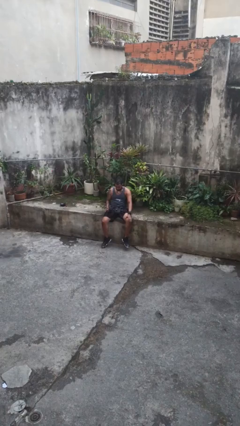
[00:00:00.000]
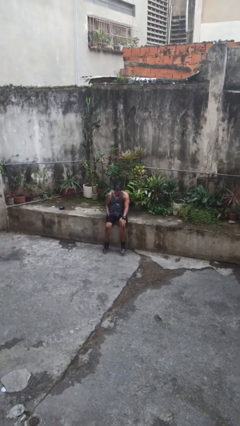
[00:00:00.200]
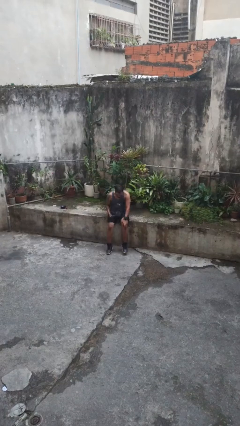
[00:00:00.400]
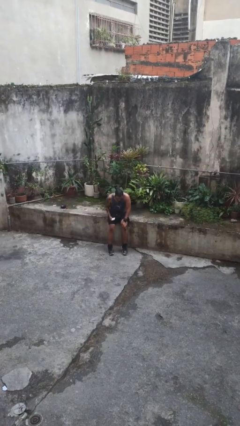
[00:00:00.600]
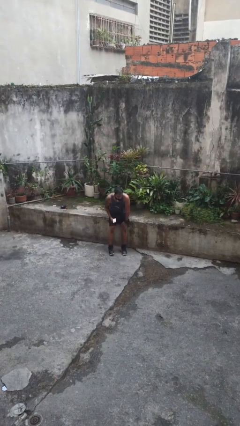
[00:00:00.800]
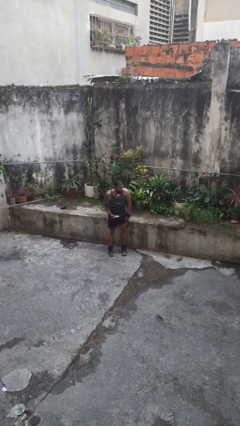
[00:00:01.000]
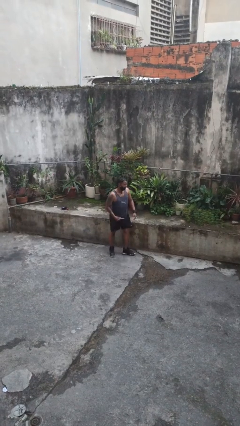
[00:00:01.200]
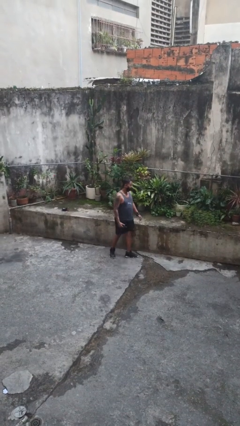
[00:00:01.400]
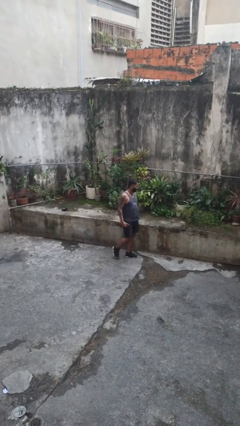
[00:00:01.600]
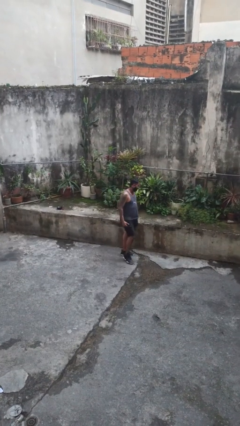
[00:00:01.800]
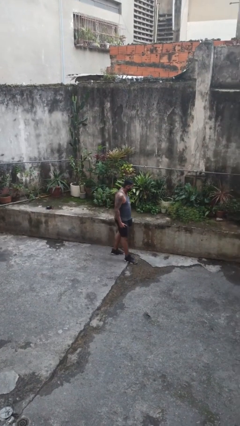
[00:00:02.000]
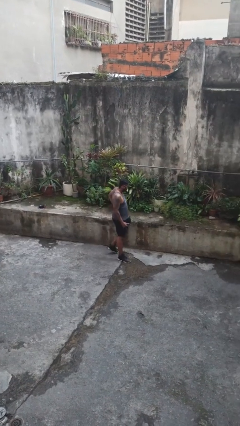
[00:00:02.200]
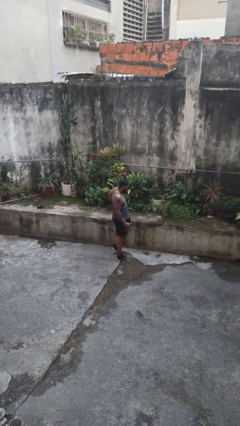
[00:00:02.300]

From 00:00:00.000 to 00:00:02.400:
person stands up

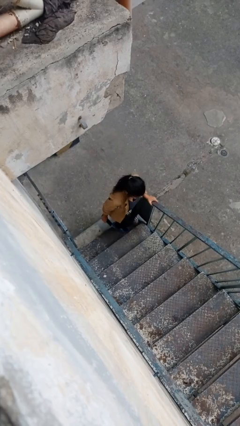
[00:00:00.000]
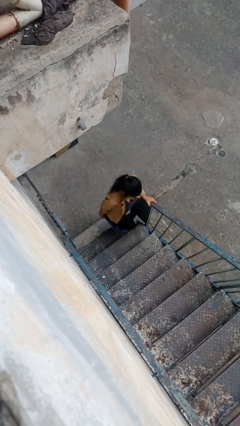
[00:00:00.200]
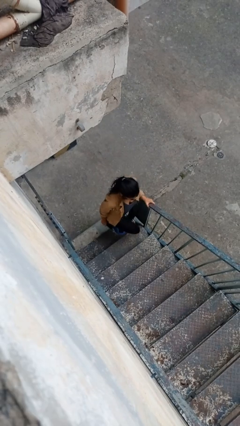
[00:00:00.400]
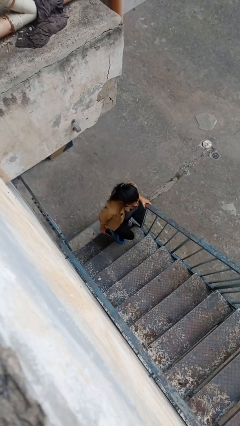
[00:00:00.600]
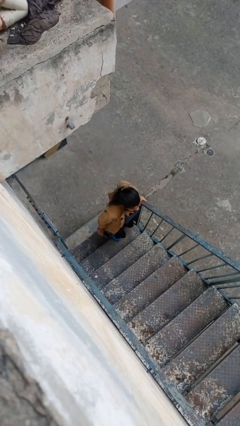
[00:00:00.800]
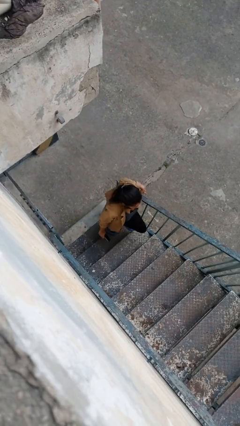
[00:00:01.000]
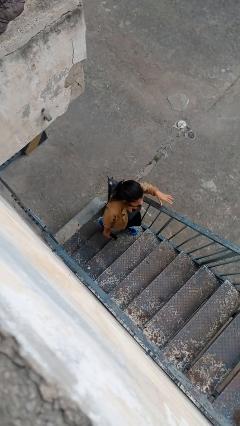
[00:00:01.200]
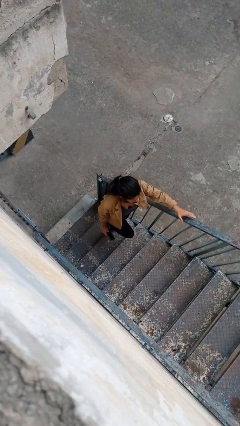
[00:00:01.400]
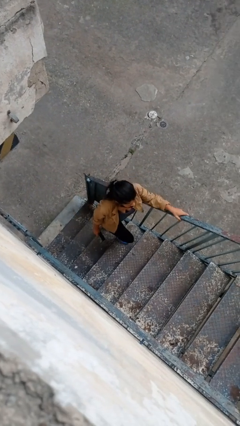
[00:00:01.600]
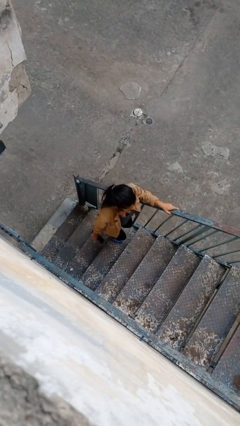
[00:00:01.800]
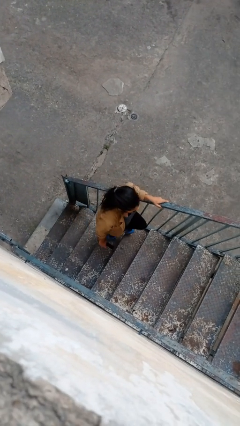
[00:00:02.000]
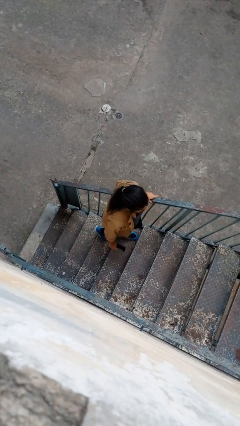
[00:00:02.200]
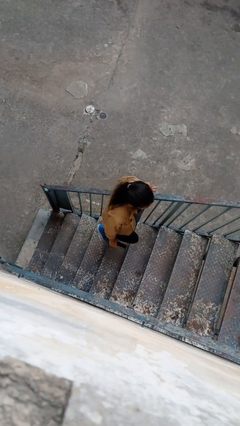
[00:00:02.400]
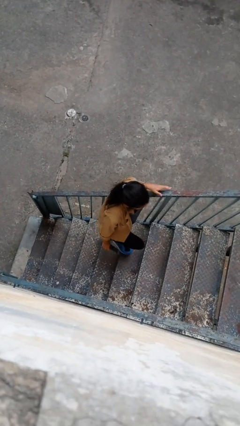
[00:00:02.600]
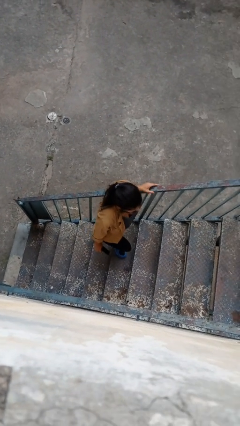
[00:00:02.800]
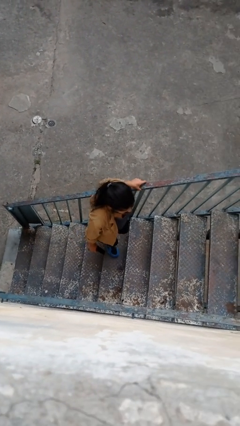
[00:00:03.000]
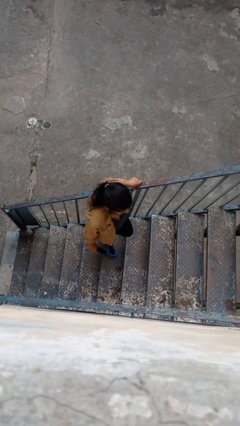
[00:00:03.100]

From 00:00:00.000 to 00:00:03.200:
person climbs up stairs

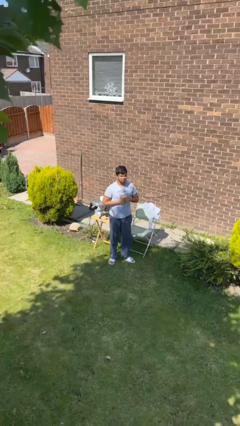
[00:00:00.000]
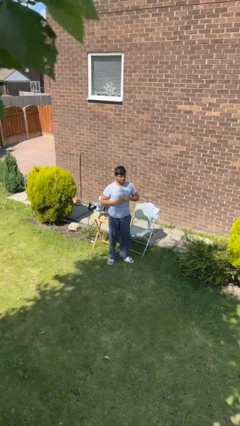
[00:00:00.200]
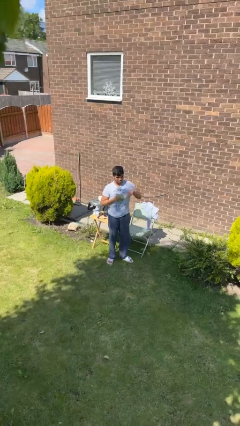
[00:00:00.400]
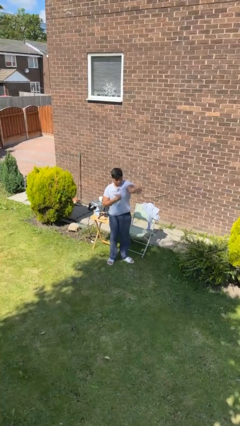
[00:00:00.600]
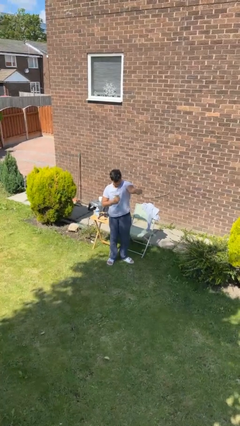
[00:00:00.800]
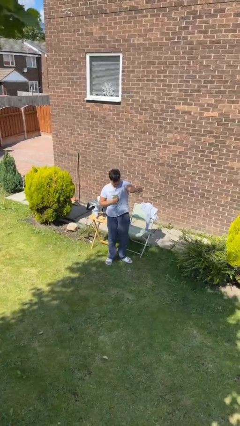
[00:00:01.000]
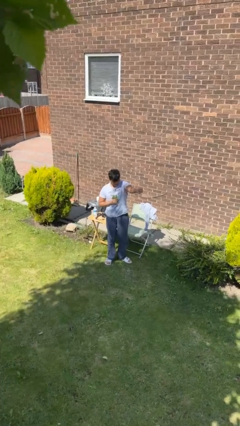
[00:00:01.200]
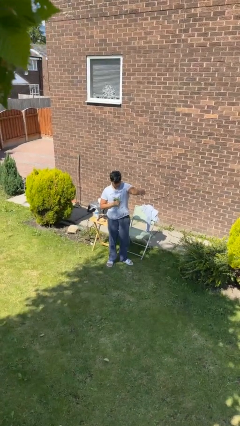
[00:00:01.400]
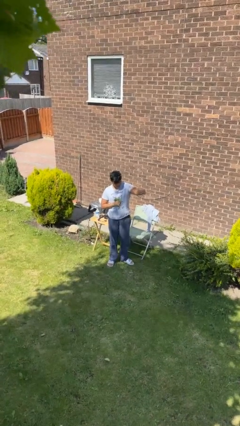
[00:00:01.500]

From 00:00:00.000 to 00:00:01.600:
person punches

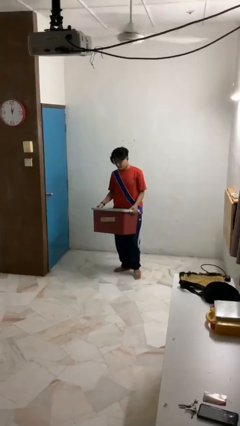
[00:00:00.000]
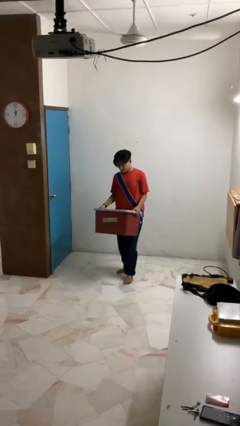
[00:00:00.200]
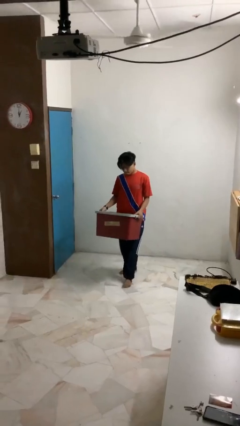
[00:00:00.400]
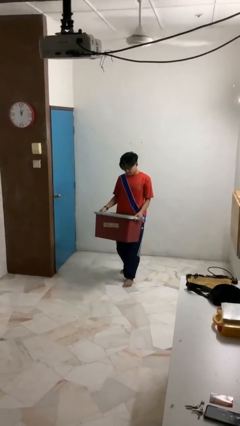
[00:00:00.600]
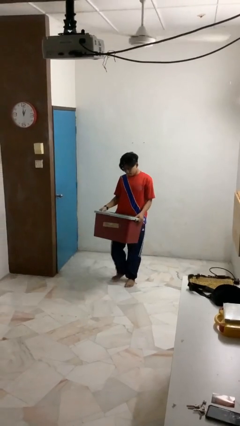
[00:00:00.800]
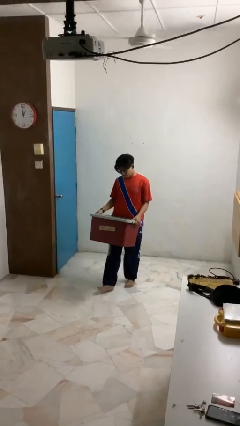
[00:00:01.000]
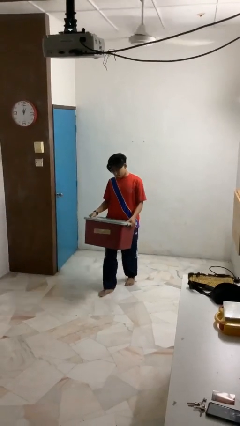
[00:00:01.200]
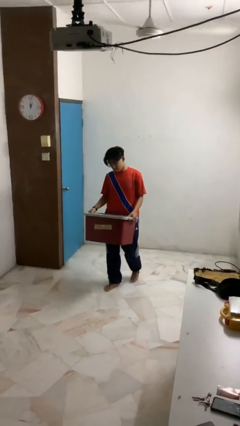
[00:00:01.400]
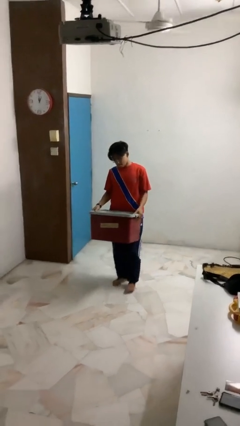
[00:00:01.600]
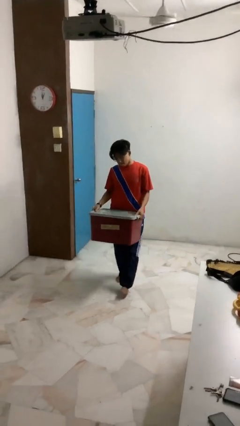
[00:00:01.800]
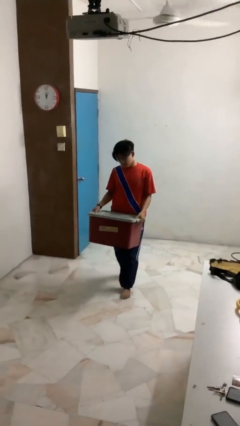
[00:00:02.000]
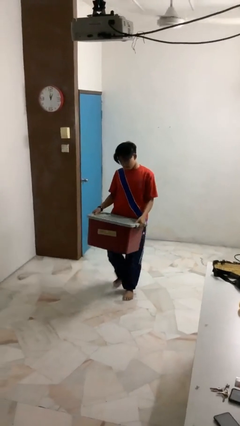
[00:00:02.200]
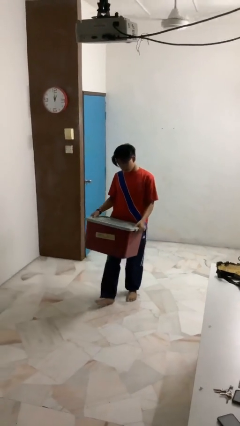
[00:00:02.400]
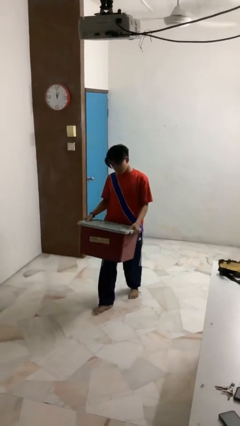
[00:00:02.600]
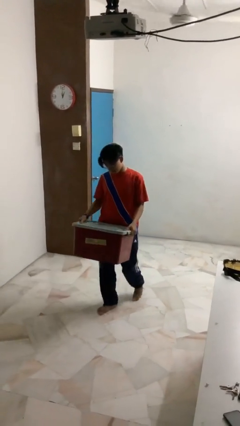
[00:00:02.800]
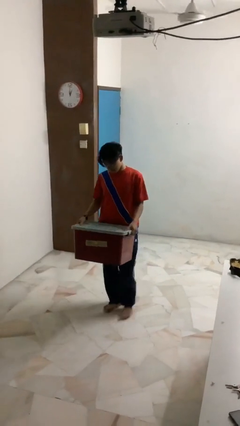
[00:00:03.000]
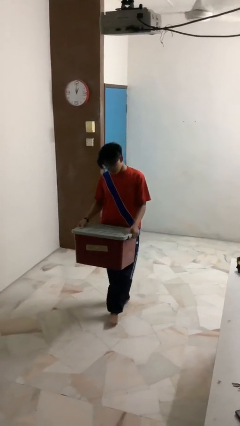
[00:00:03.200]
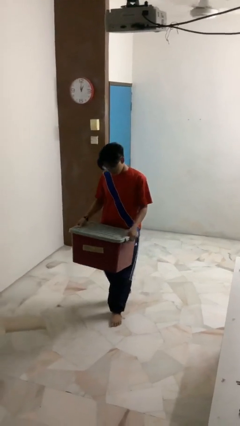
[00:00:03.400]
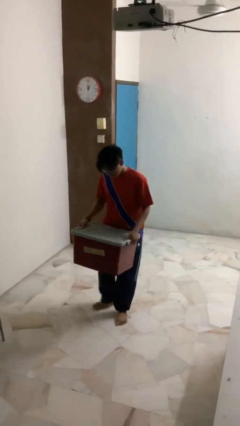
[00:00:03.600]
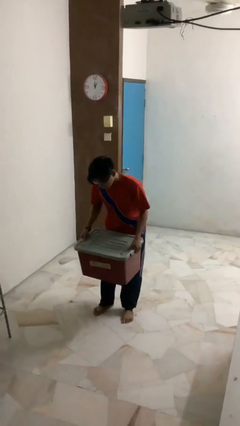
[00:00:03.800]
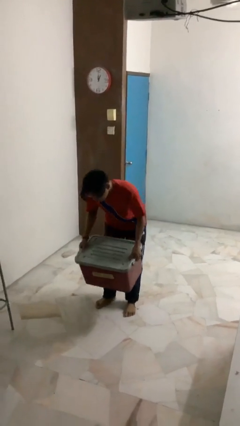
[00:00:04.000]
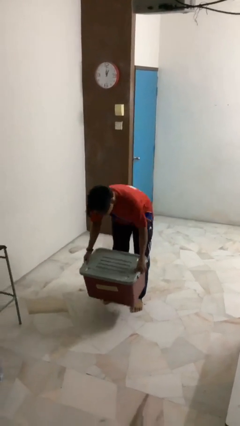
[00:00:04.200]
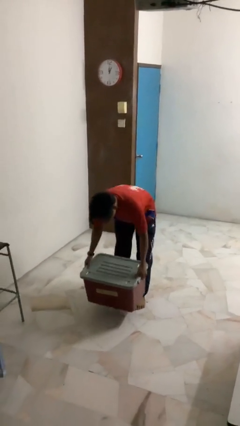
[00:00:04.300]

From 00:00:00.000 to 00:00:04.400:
person carries heavy object

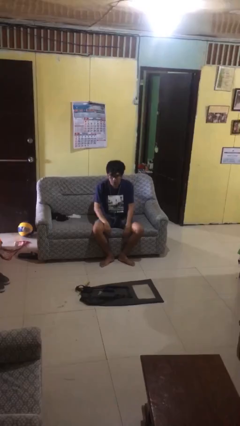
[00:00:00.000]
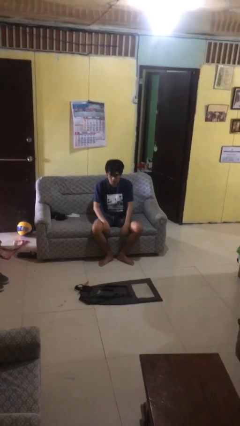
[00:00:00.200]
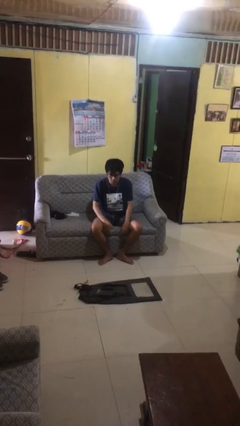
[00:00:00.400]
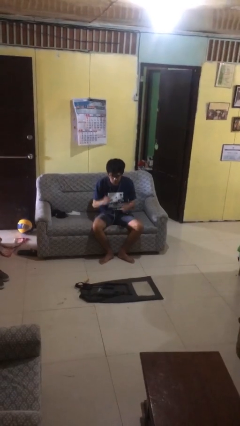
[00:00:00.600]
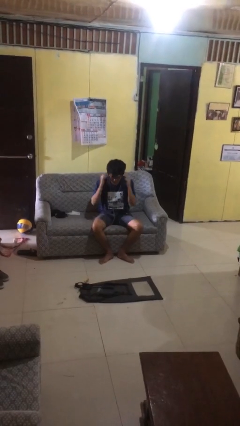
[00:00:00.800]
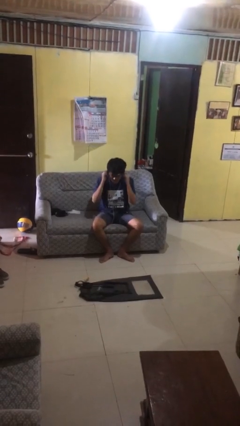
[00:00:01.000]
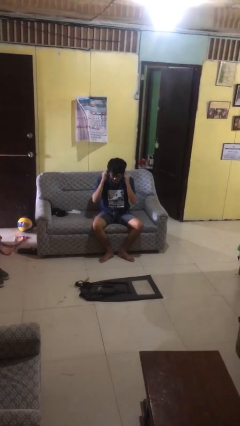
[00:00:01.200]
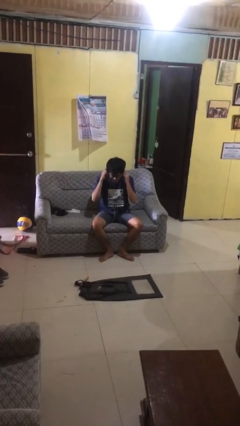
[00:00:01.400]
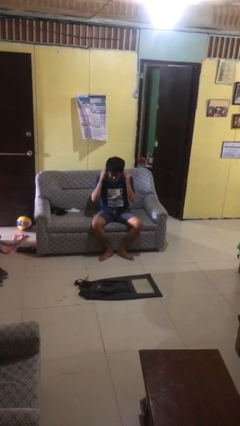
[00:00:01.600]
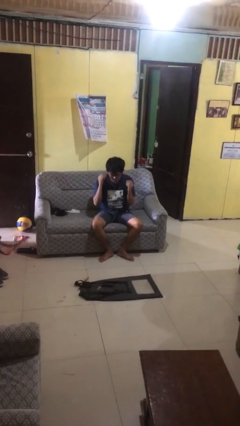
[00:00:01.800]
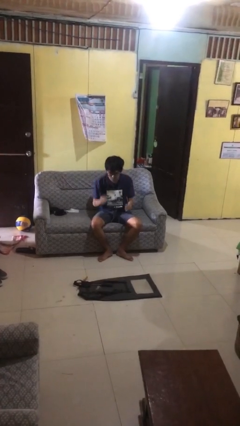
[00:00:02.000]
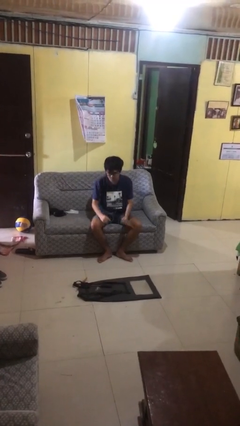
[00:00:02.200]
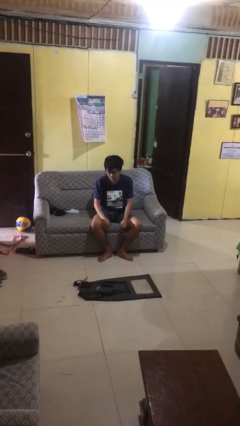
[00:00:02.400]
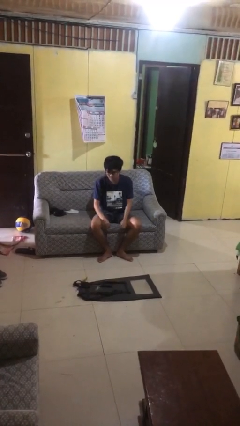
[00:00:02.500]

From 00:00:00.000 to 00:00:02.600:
person takes off headphones

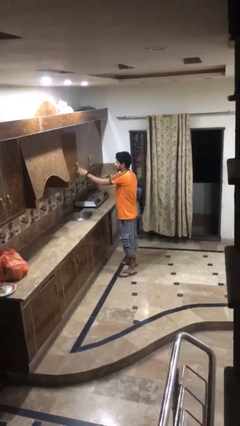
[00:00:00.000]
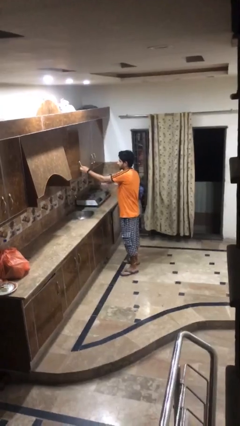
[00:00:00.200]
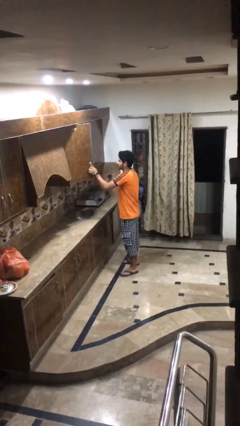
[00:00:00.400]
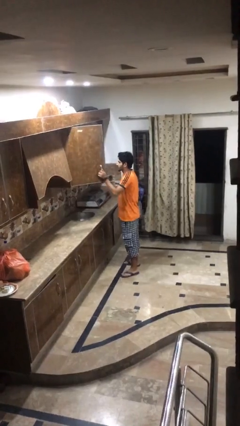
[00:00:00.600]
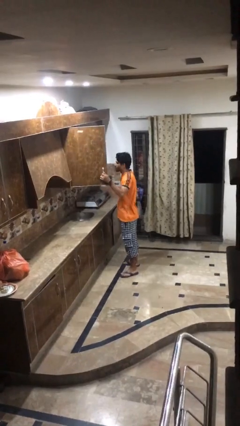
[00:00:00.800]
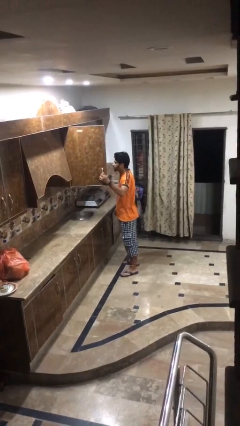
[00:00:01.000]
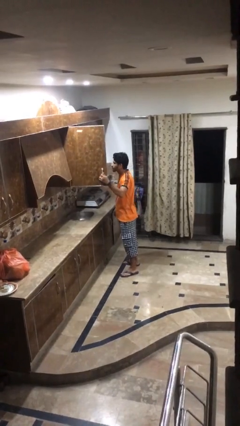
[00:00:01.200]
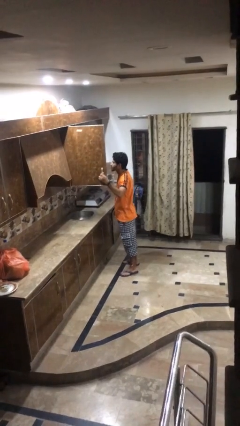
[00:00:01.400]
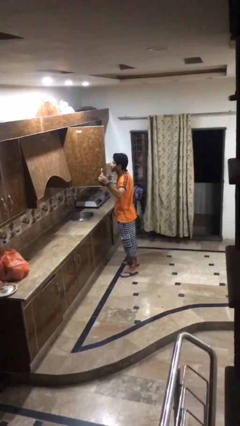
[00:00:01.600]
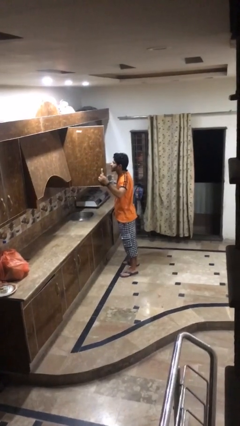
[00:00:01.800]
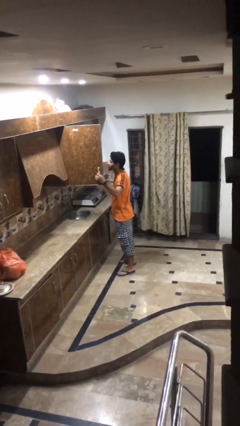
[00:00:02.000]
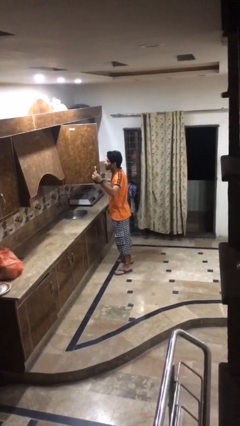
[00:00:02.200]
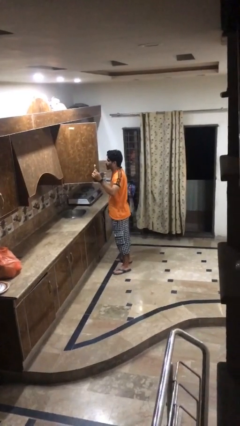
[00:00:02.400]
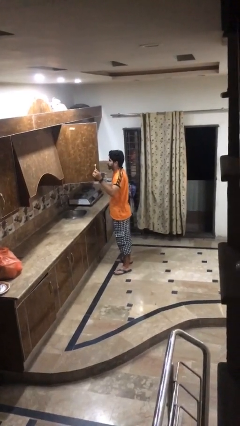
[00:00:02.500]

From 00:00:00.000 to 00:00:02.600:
person opens kitchen drawer

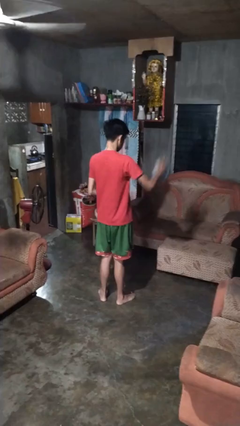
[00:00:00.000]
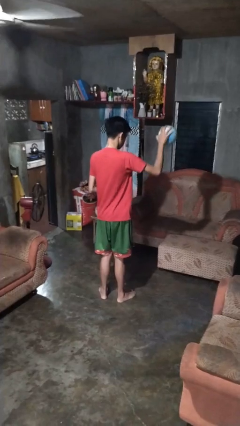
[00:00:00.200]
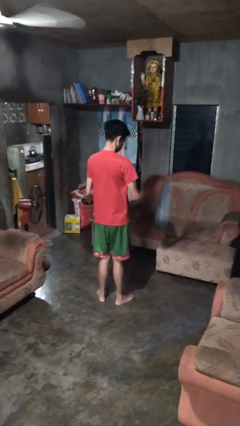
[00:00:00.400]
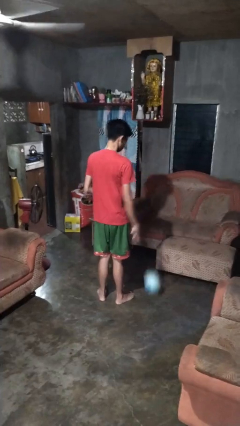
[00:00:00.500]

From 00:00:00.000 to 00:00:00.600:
person bounces ball on floor
